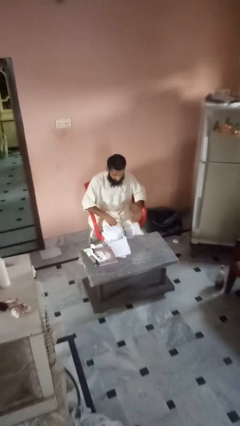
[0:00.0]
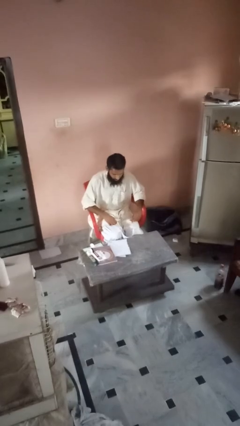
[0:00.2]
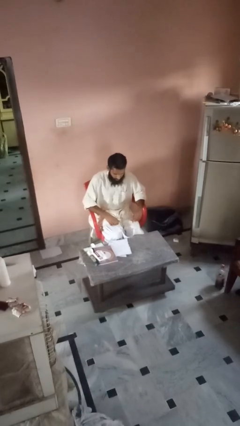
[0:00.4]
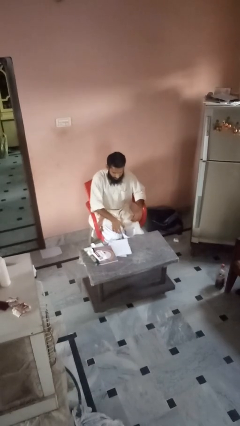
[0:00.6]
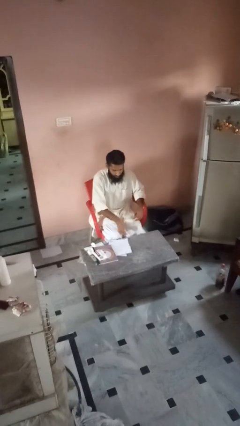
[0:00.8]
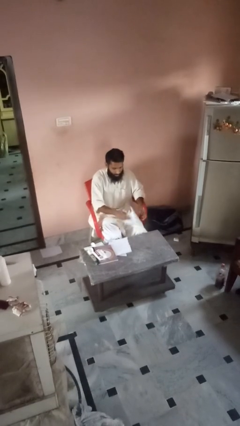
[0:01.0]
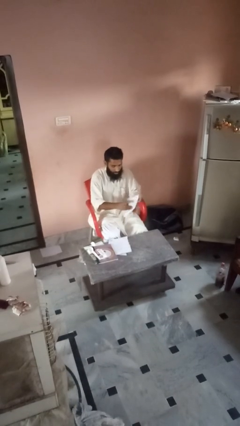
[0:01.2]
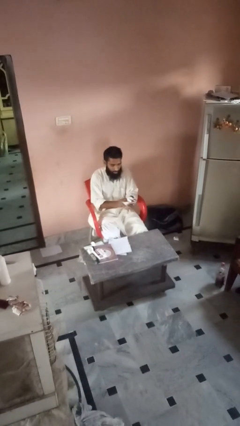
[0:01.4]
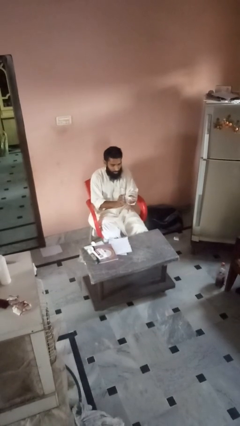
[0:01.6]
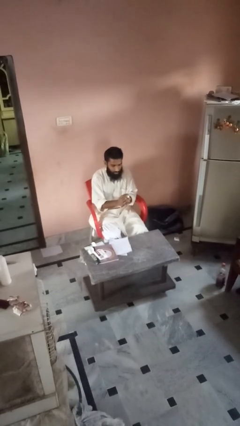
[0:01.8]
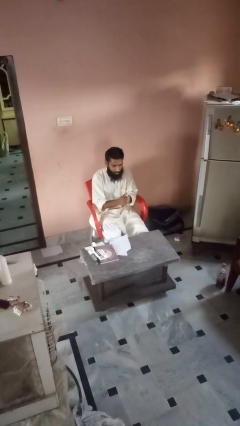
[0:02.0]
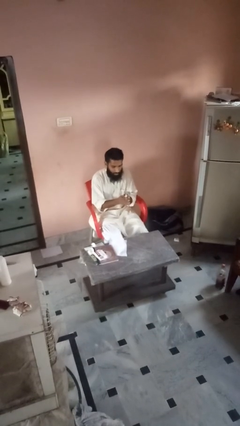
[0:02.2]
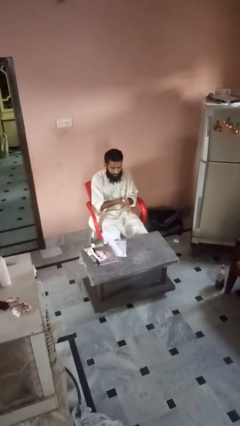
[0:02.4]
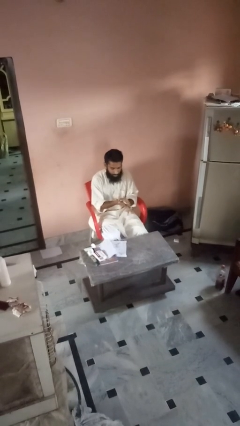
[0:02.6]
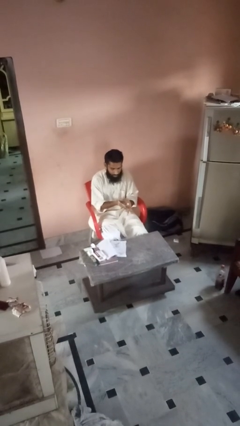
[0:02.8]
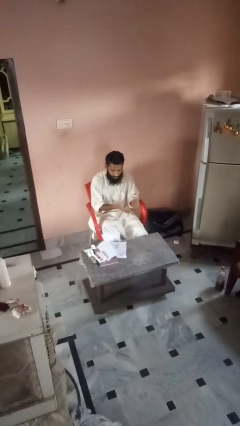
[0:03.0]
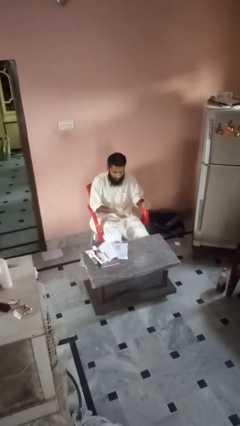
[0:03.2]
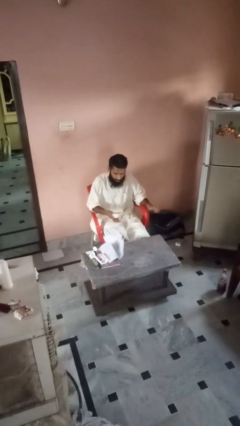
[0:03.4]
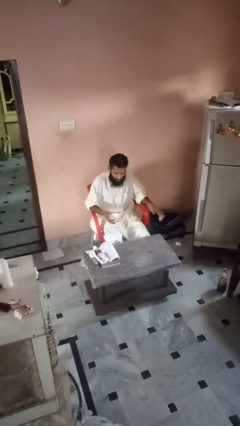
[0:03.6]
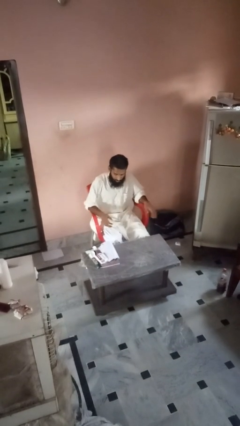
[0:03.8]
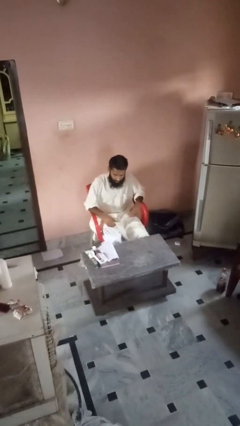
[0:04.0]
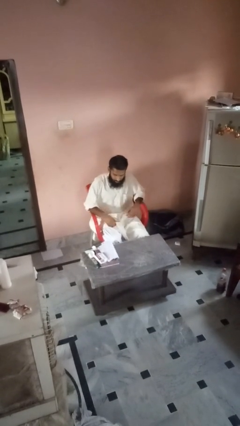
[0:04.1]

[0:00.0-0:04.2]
person crumples paper

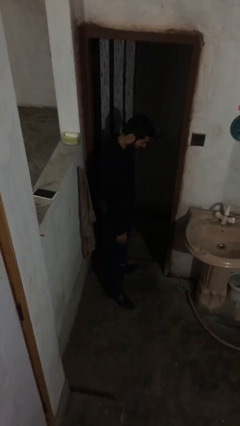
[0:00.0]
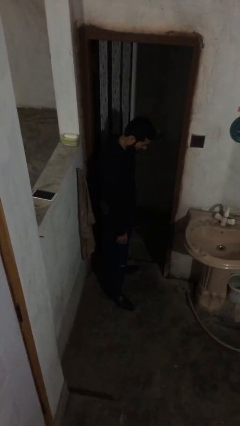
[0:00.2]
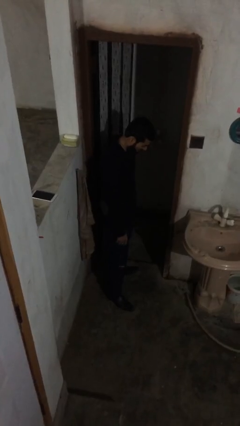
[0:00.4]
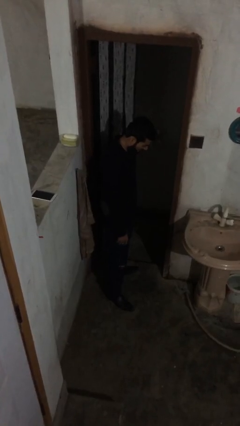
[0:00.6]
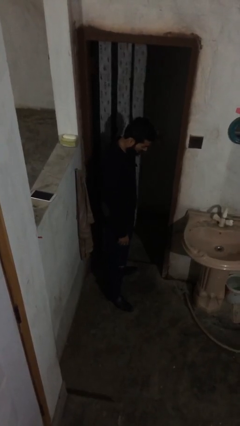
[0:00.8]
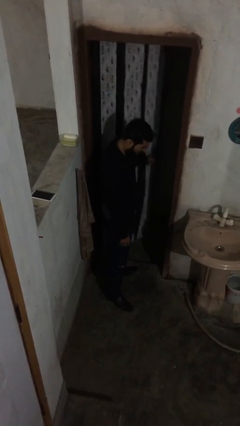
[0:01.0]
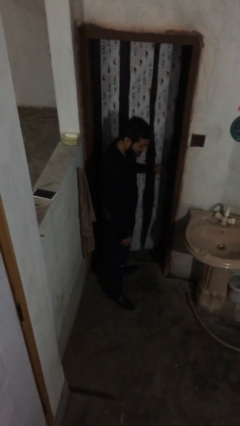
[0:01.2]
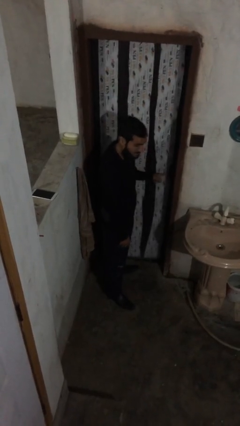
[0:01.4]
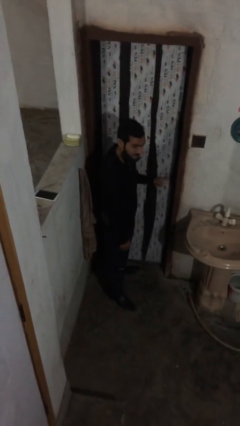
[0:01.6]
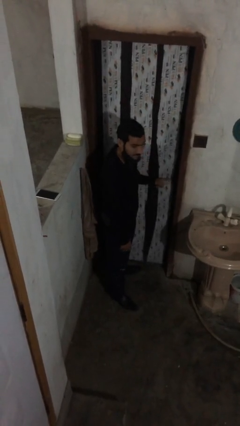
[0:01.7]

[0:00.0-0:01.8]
person closes facility door

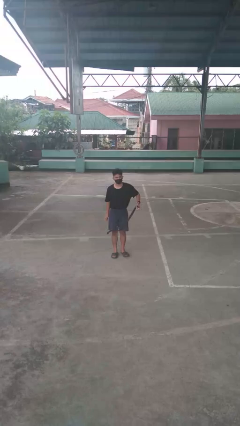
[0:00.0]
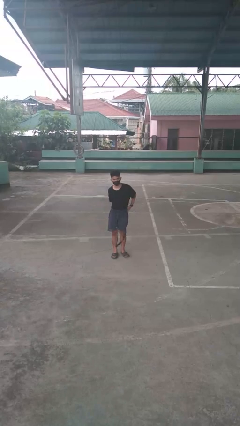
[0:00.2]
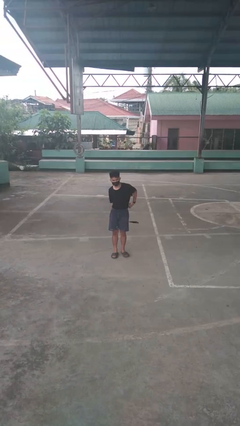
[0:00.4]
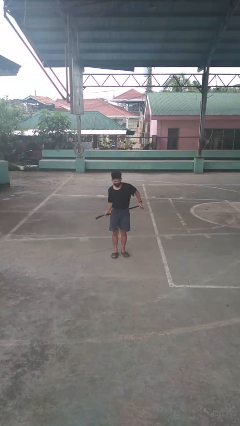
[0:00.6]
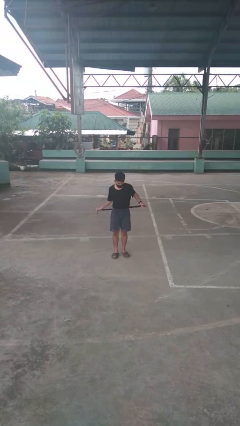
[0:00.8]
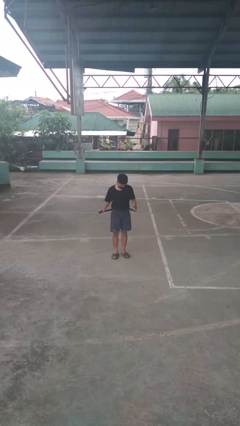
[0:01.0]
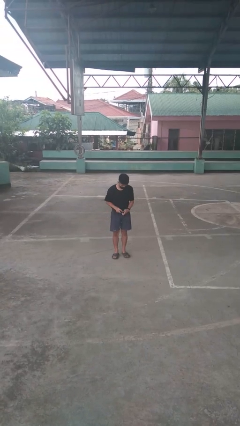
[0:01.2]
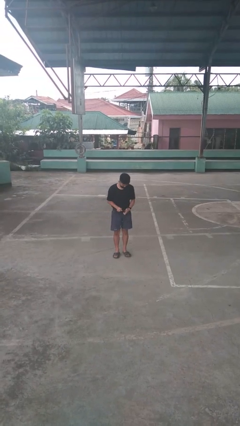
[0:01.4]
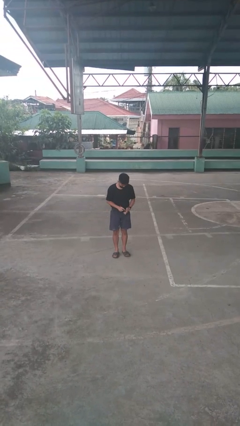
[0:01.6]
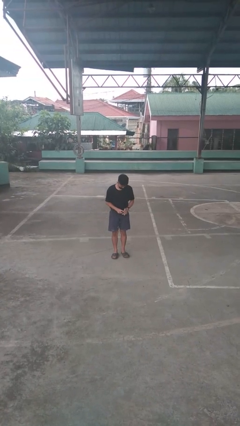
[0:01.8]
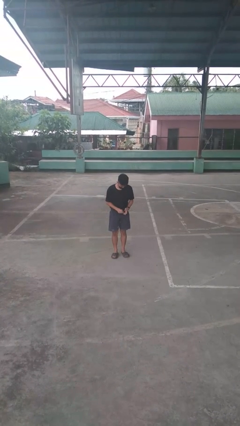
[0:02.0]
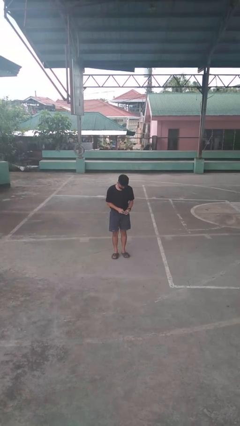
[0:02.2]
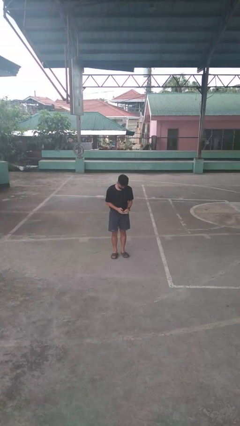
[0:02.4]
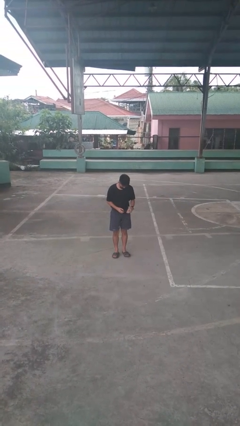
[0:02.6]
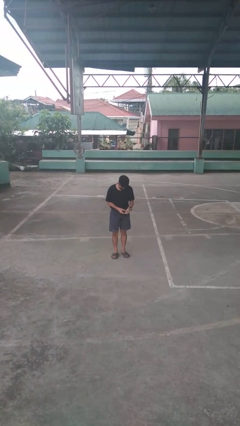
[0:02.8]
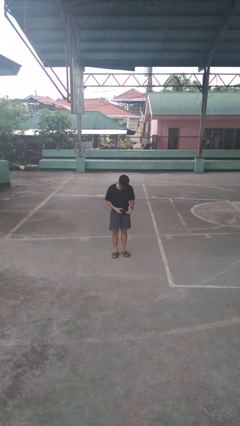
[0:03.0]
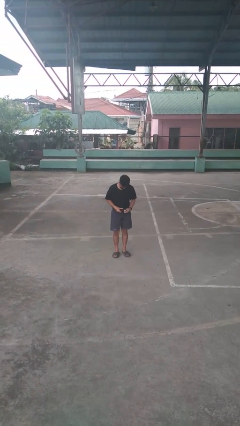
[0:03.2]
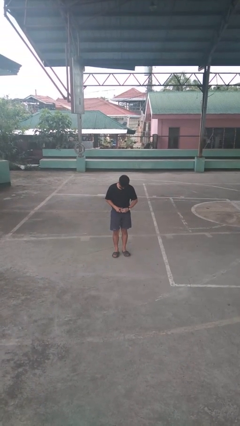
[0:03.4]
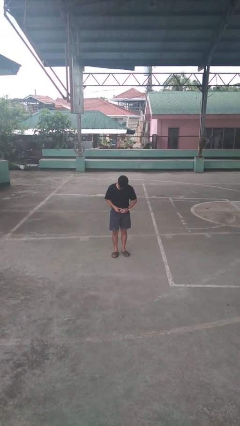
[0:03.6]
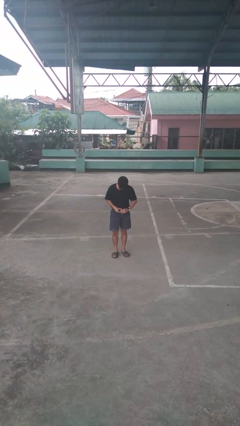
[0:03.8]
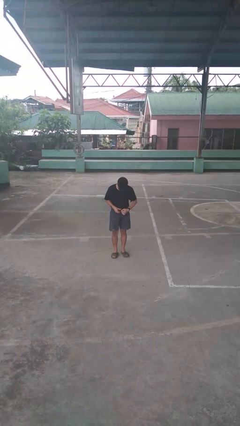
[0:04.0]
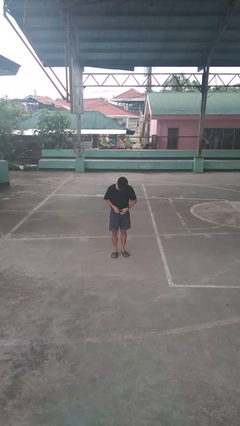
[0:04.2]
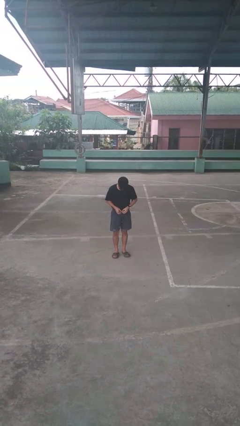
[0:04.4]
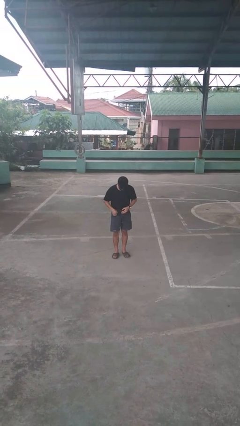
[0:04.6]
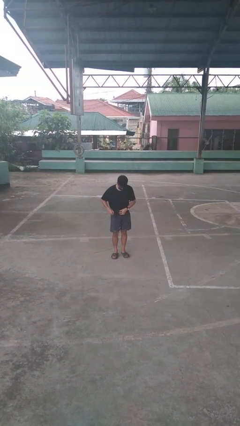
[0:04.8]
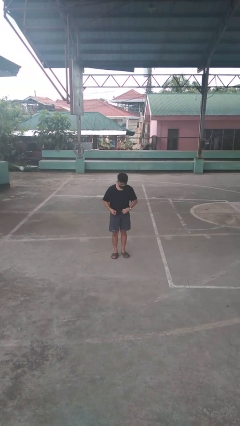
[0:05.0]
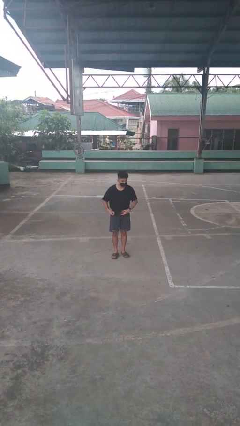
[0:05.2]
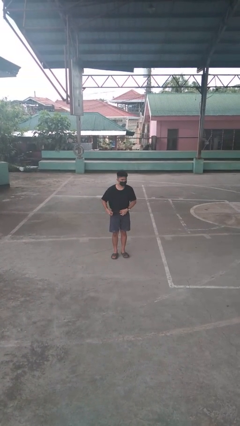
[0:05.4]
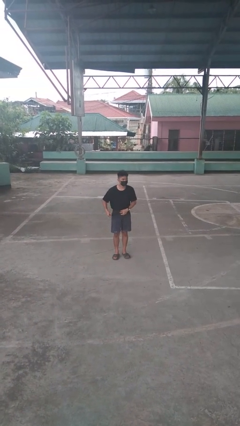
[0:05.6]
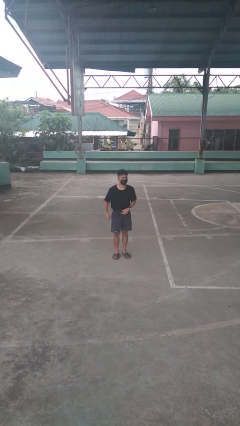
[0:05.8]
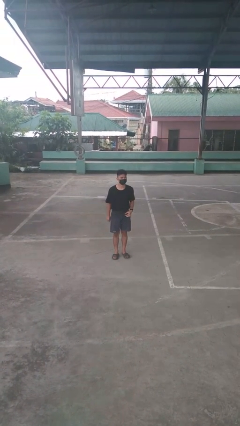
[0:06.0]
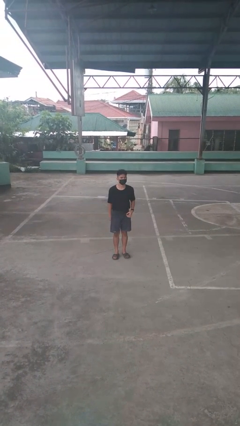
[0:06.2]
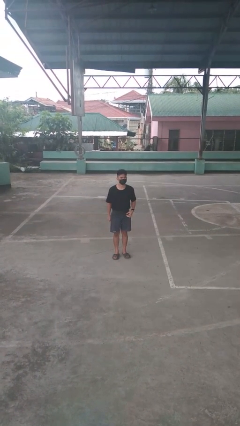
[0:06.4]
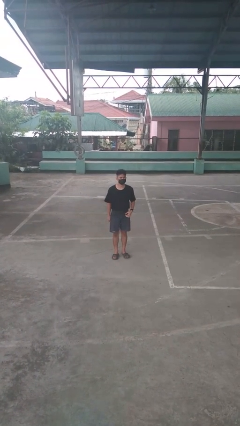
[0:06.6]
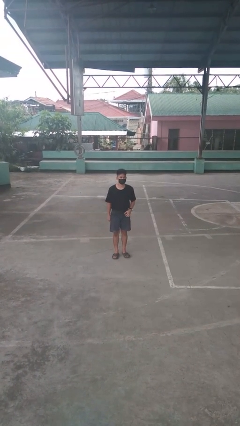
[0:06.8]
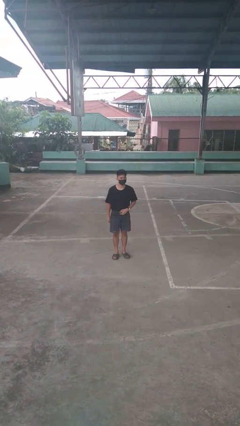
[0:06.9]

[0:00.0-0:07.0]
person puts on belt

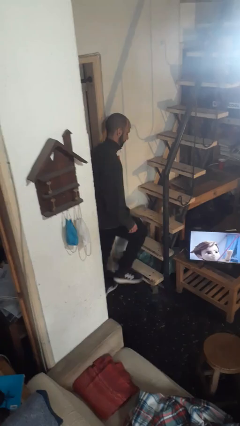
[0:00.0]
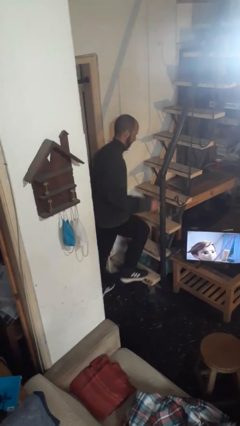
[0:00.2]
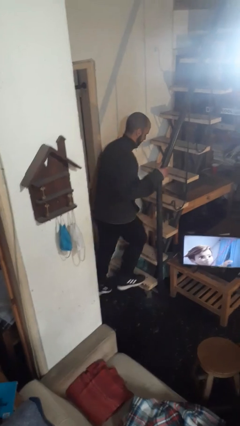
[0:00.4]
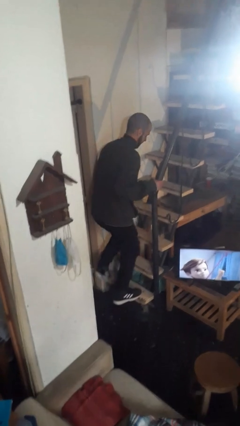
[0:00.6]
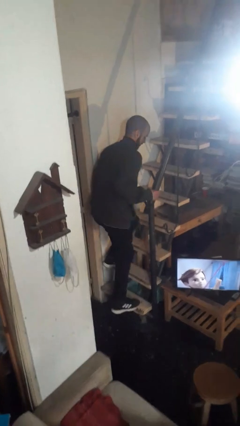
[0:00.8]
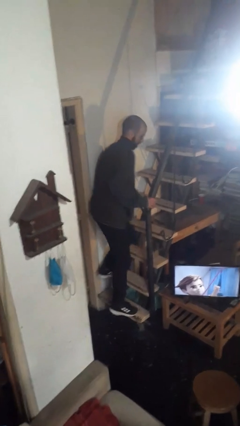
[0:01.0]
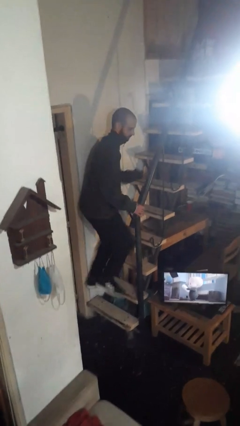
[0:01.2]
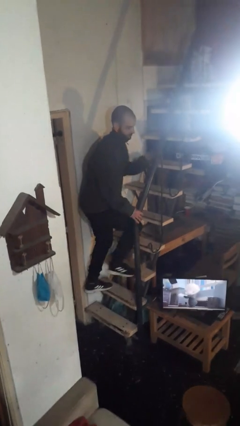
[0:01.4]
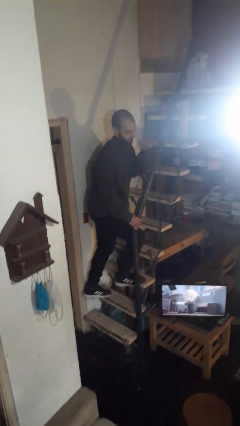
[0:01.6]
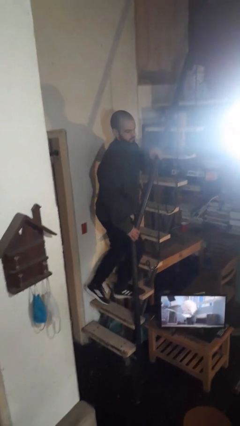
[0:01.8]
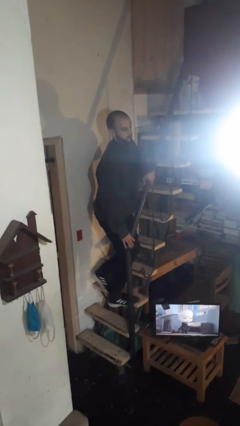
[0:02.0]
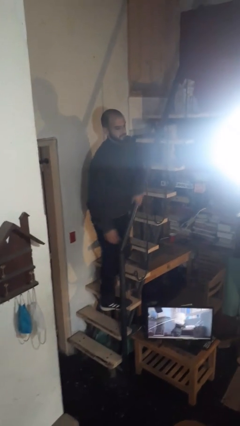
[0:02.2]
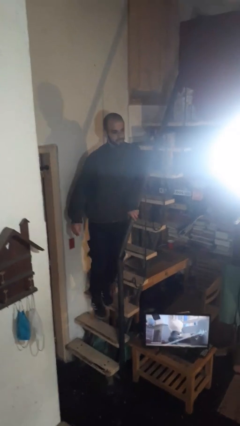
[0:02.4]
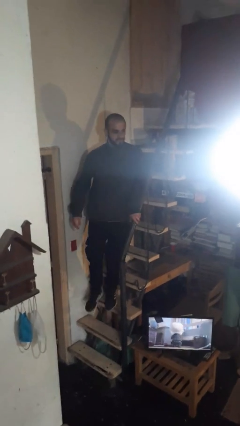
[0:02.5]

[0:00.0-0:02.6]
person climbs up stairs

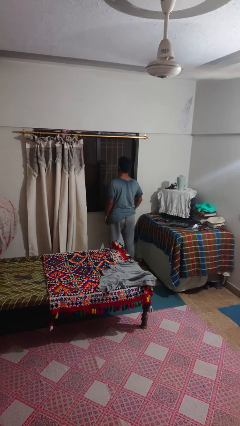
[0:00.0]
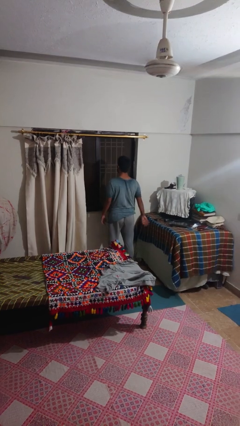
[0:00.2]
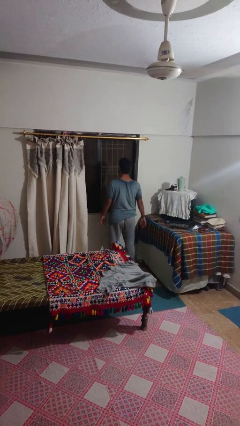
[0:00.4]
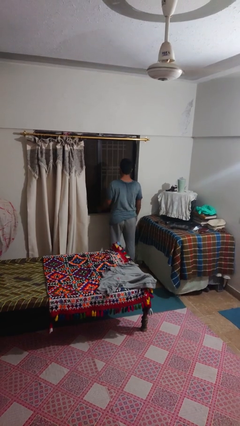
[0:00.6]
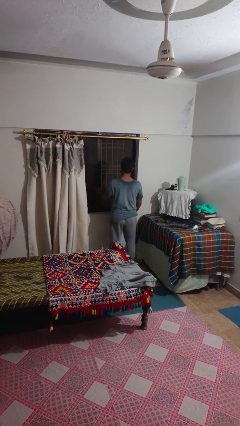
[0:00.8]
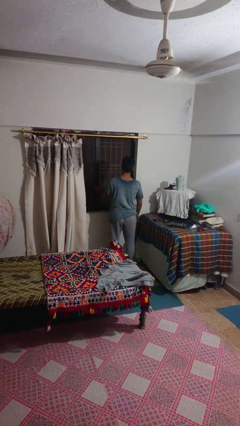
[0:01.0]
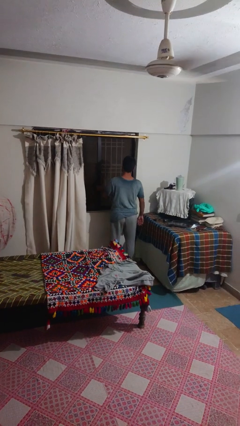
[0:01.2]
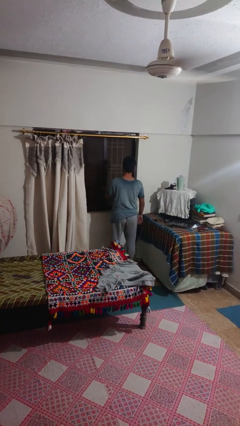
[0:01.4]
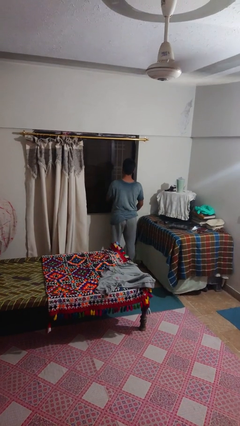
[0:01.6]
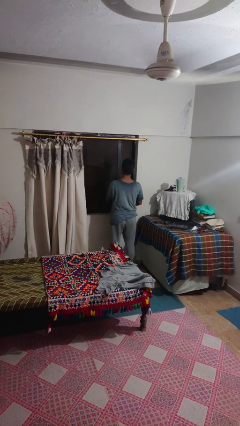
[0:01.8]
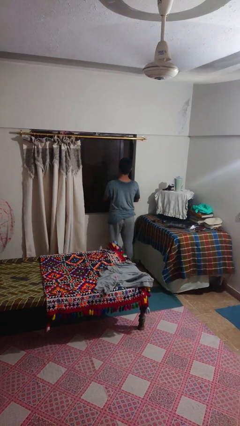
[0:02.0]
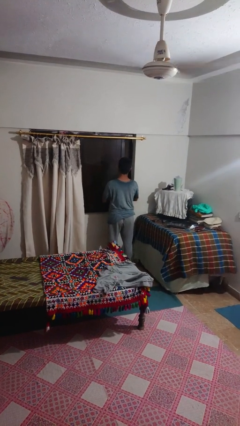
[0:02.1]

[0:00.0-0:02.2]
person closes home window
